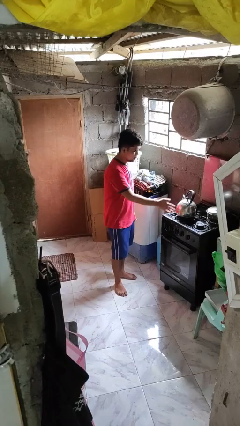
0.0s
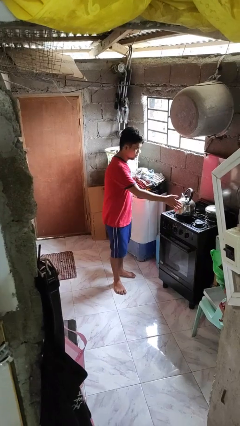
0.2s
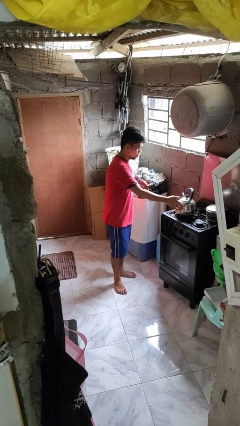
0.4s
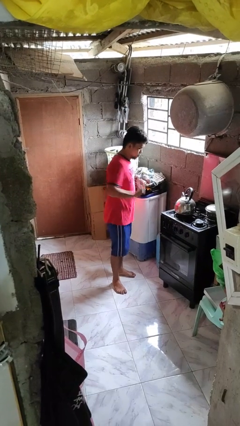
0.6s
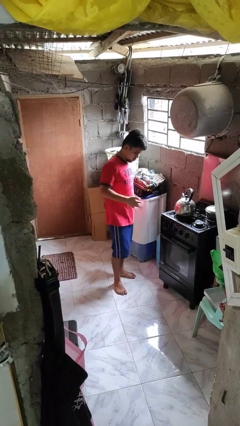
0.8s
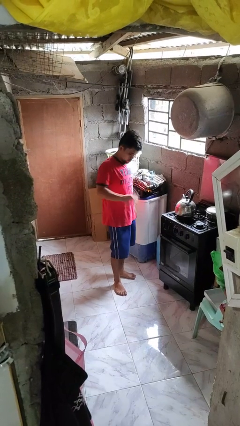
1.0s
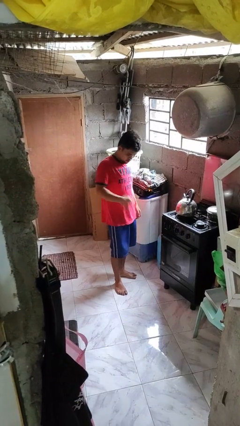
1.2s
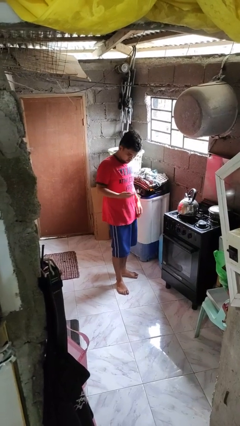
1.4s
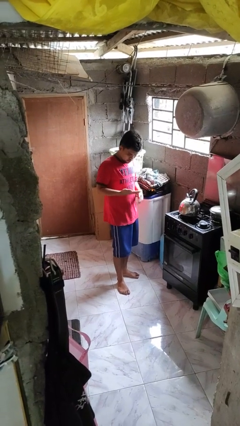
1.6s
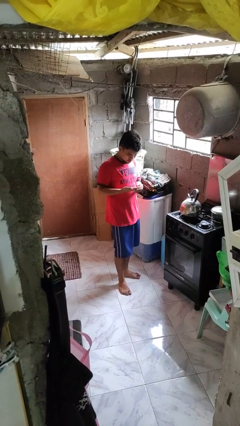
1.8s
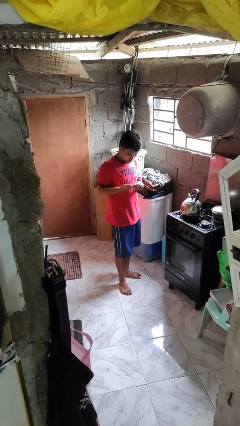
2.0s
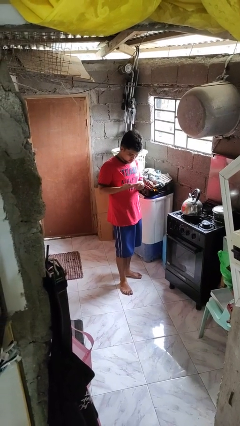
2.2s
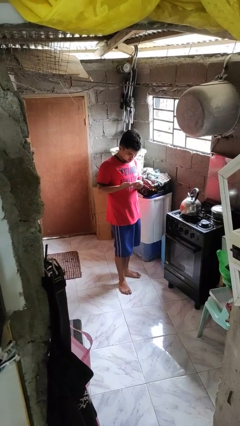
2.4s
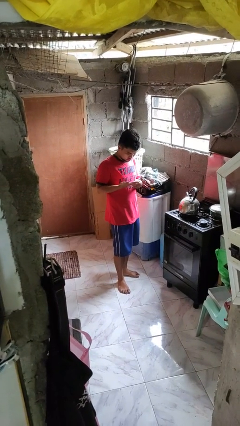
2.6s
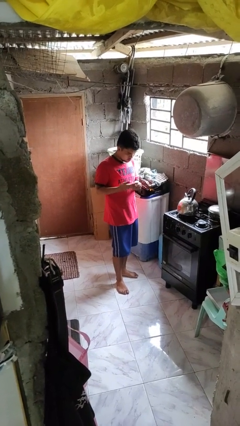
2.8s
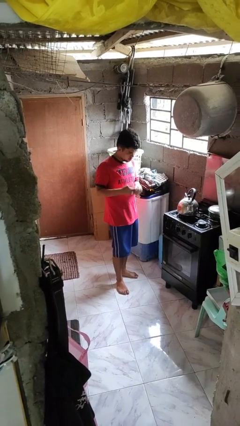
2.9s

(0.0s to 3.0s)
person burns hand

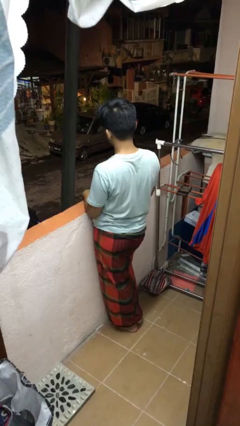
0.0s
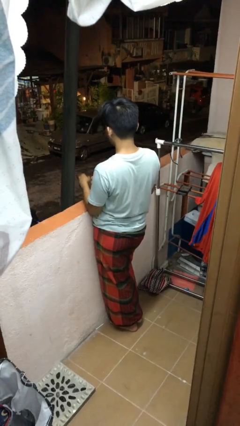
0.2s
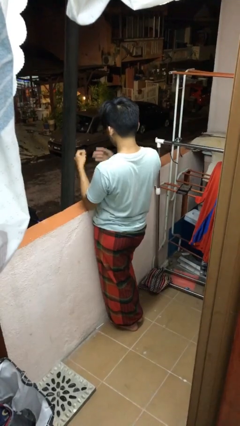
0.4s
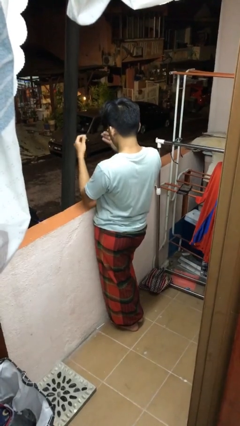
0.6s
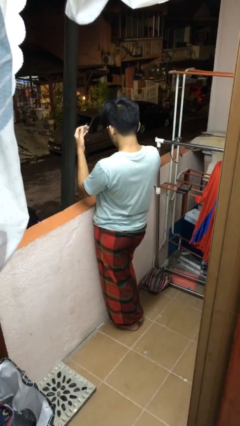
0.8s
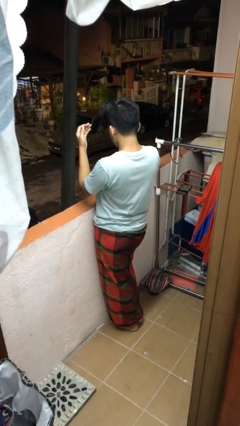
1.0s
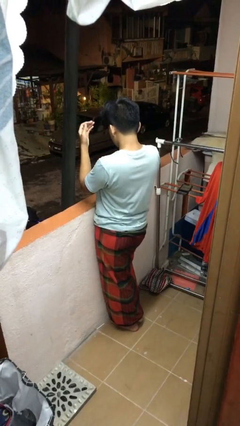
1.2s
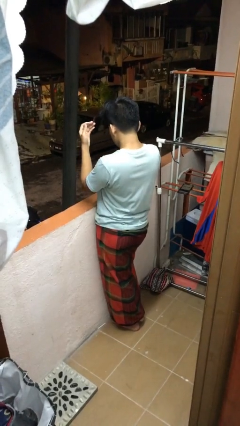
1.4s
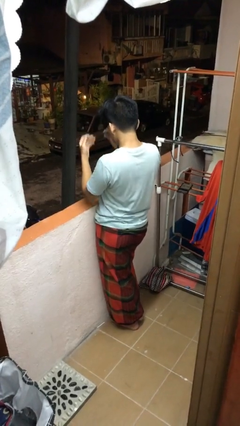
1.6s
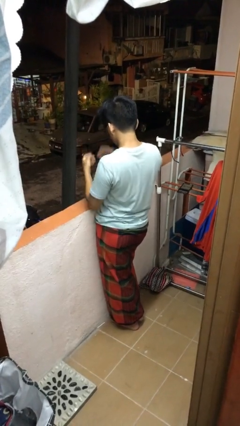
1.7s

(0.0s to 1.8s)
person prays

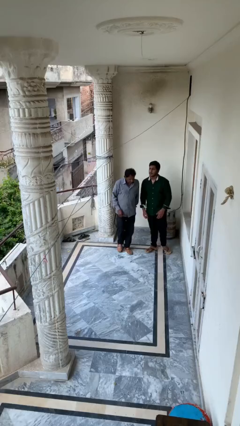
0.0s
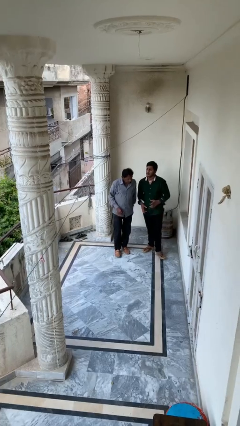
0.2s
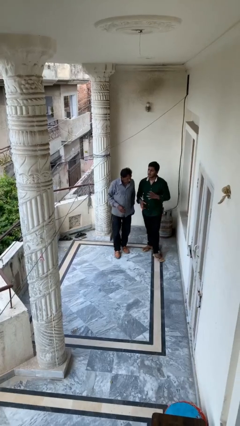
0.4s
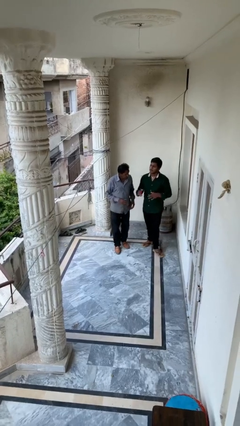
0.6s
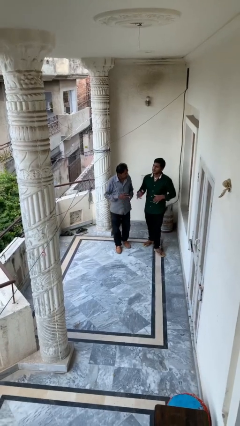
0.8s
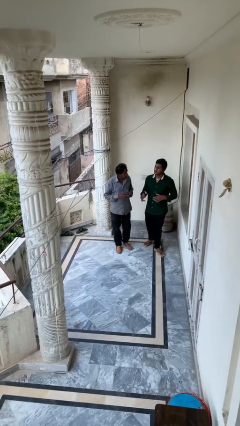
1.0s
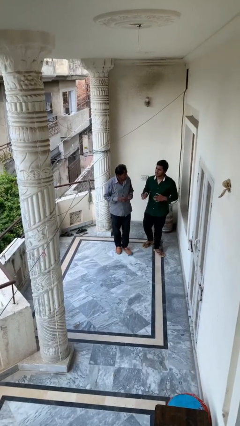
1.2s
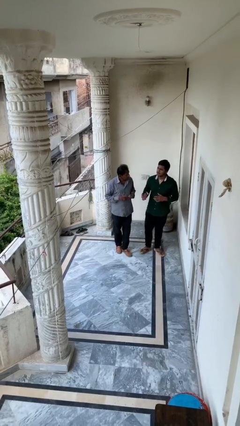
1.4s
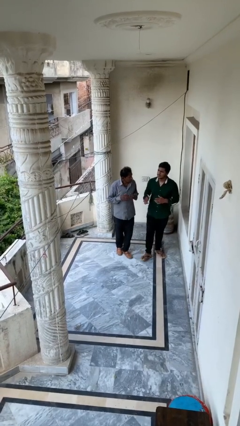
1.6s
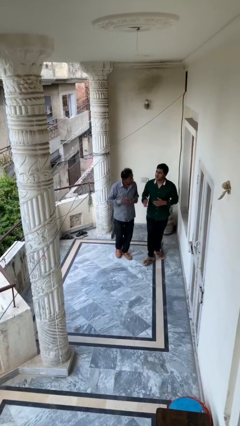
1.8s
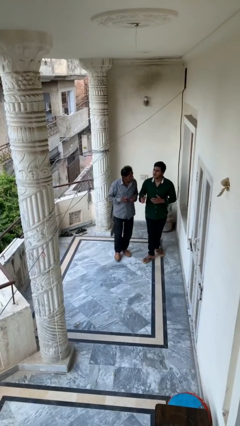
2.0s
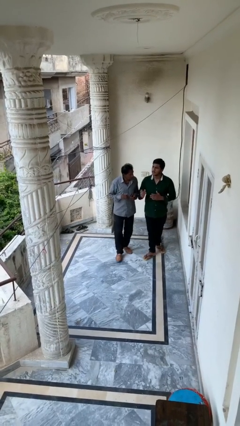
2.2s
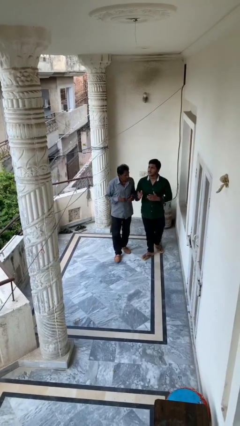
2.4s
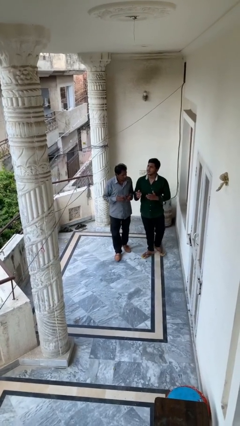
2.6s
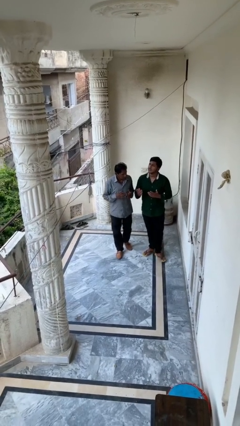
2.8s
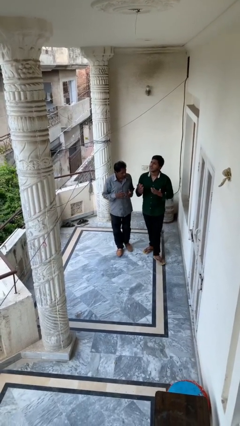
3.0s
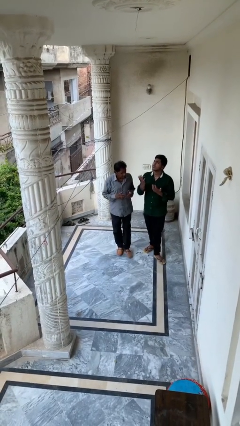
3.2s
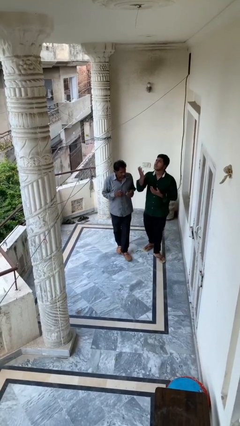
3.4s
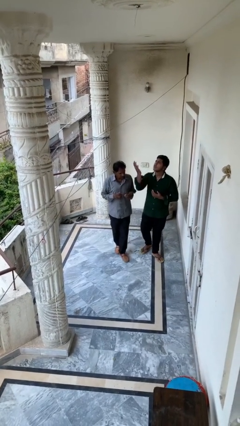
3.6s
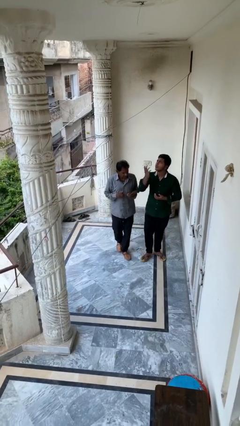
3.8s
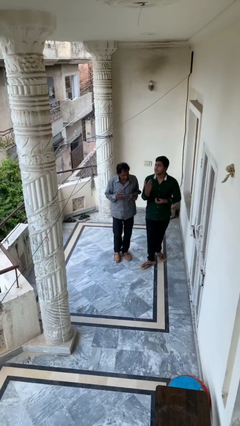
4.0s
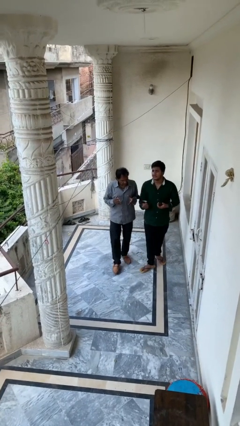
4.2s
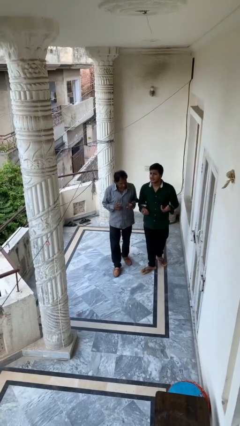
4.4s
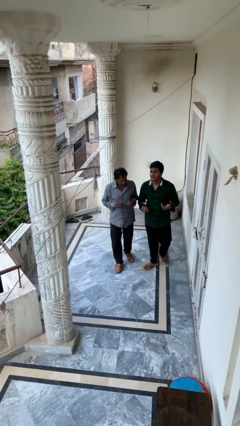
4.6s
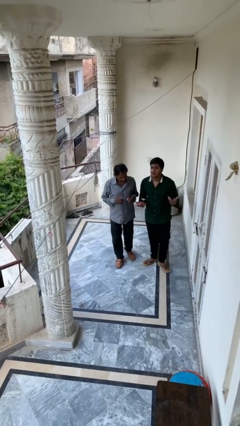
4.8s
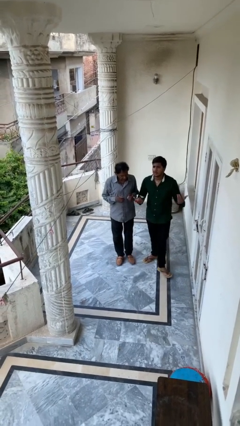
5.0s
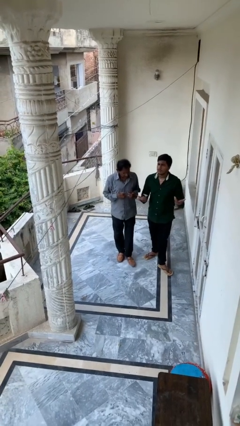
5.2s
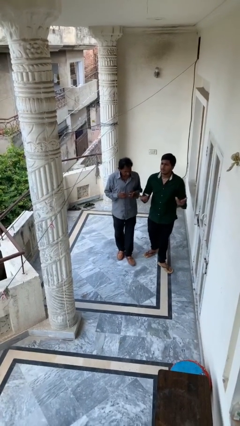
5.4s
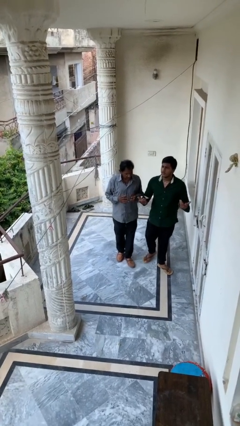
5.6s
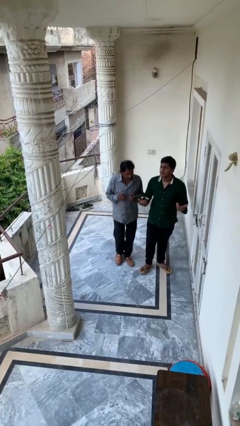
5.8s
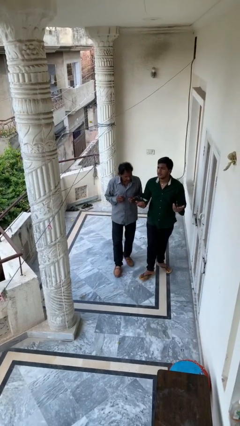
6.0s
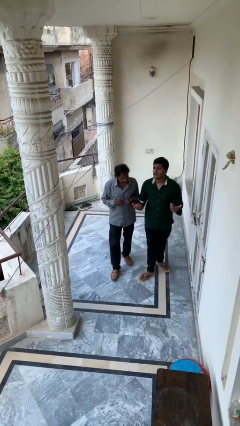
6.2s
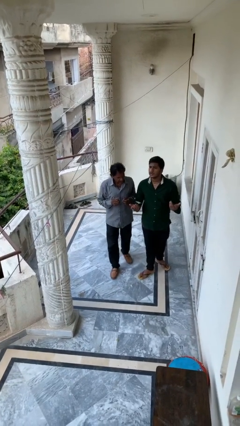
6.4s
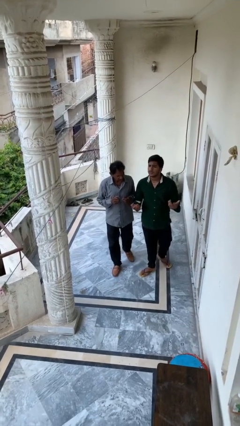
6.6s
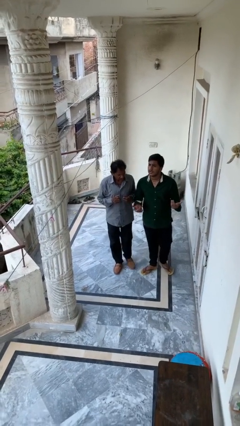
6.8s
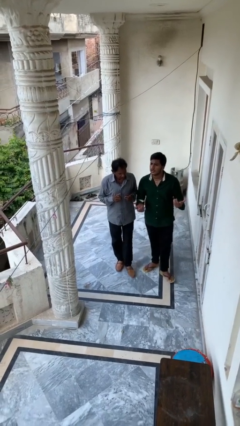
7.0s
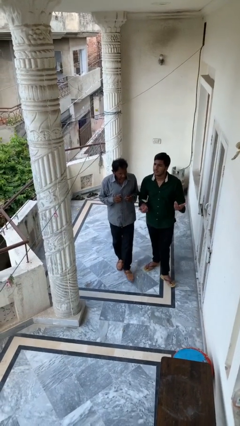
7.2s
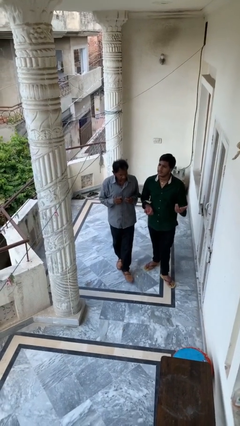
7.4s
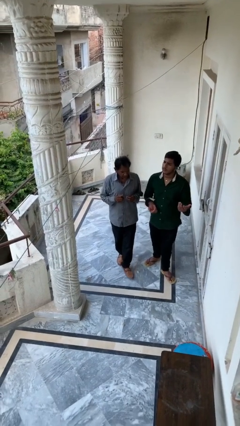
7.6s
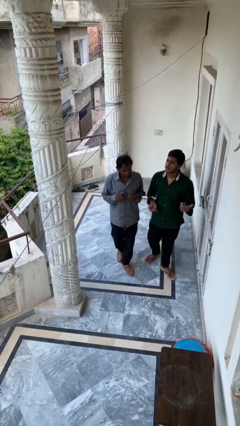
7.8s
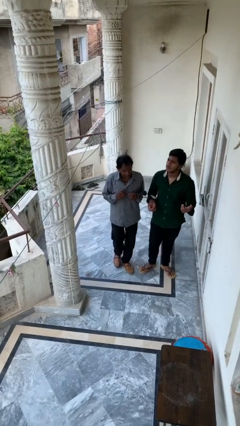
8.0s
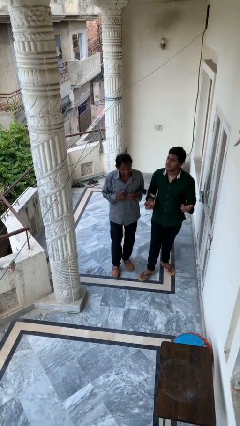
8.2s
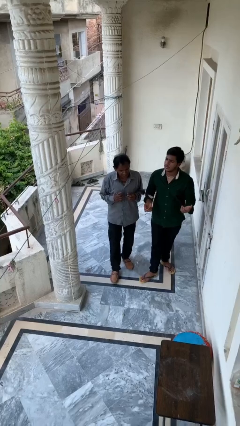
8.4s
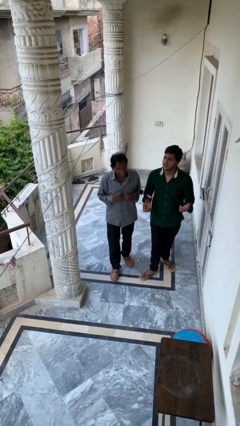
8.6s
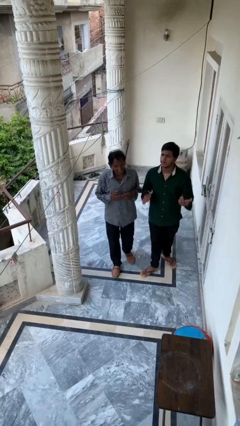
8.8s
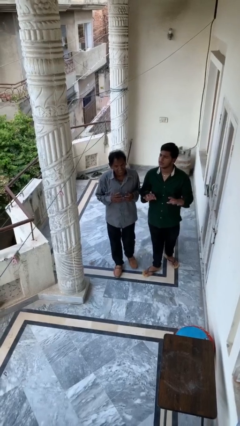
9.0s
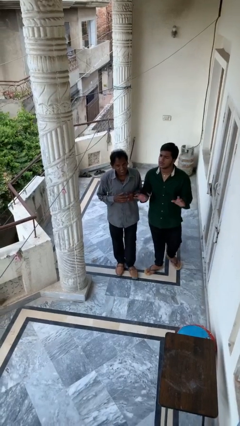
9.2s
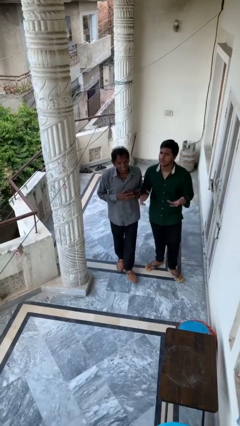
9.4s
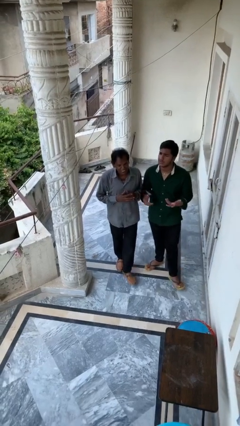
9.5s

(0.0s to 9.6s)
person talks to person

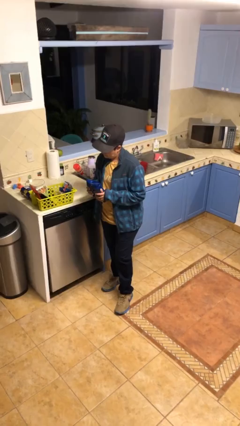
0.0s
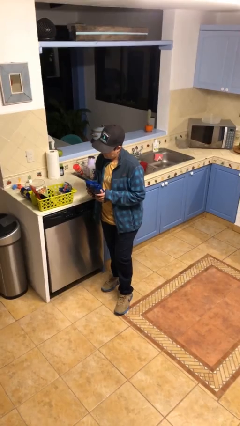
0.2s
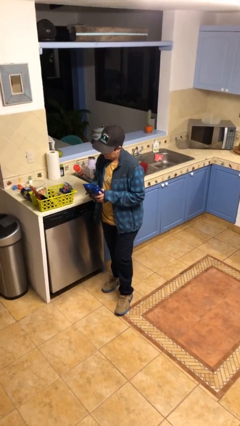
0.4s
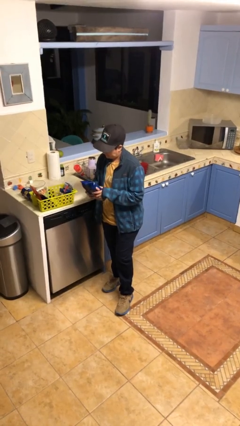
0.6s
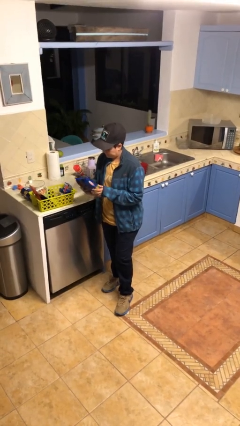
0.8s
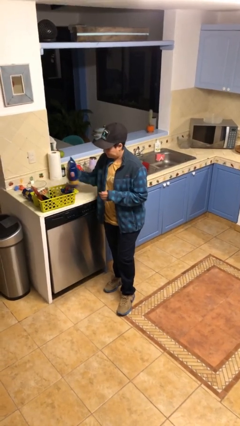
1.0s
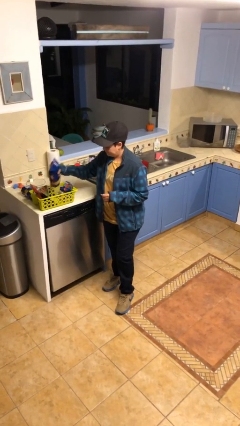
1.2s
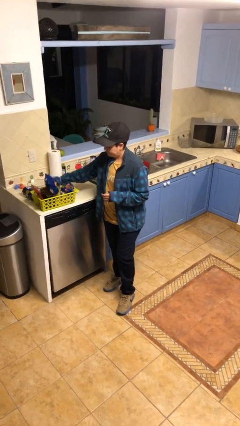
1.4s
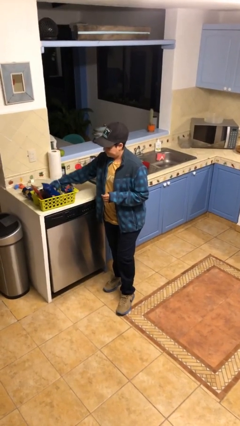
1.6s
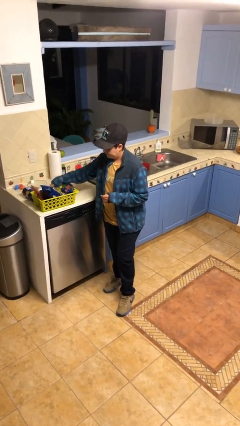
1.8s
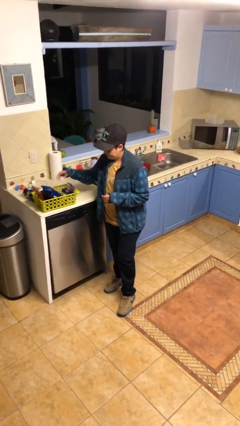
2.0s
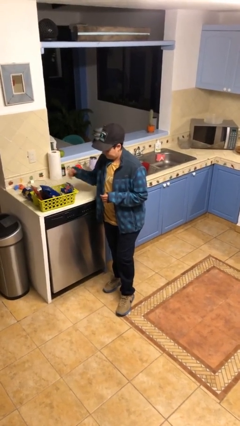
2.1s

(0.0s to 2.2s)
person puts object into basket

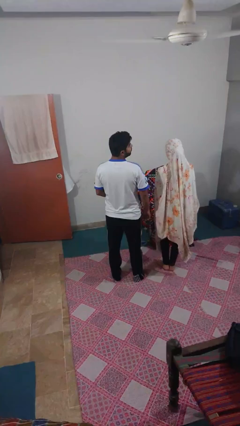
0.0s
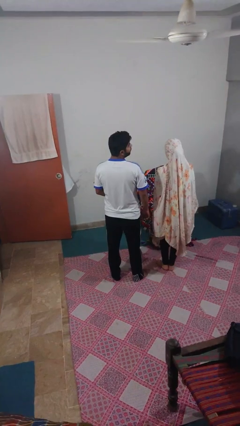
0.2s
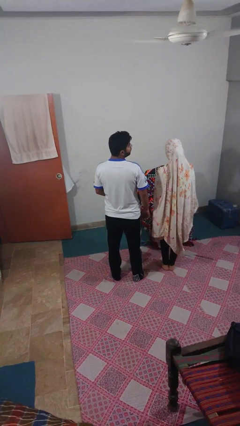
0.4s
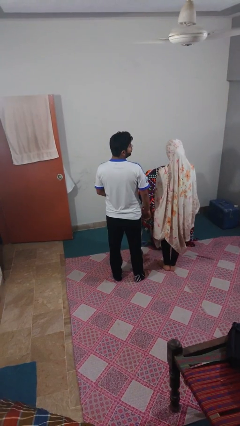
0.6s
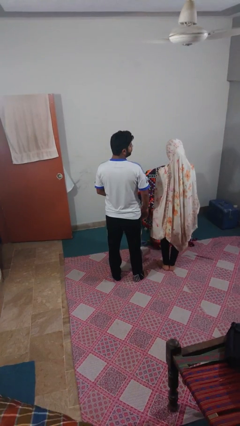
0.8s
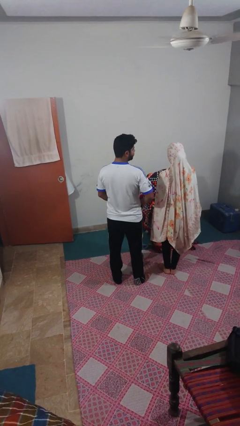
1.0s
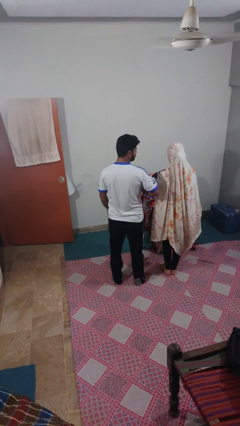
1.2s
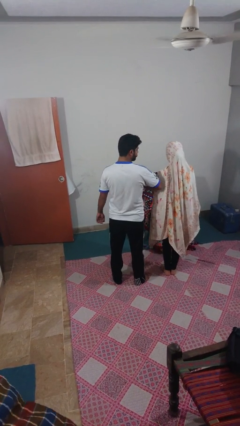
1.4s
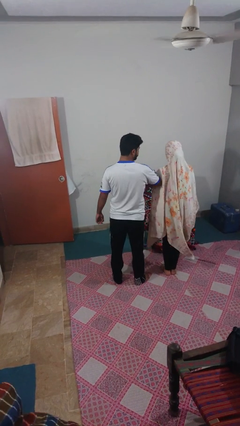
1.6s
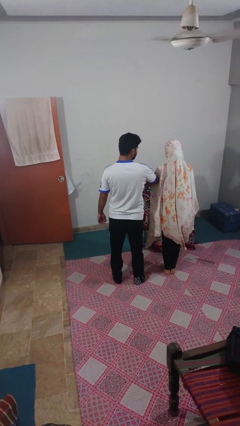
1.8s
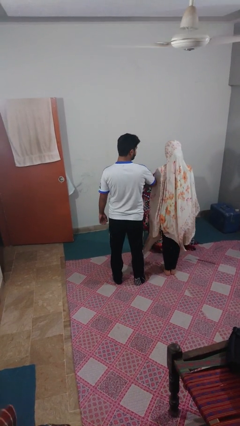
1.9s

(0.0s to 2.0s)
person nudges person with elbow
